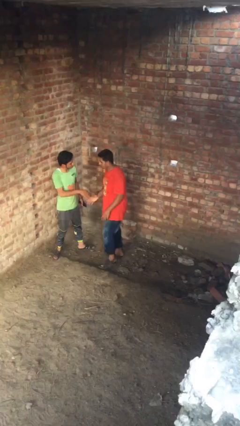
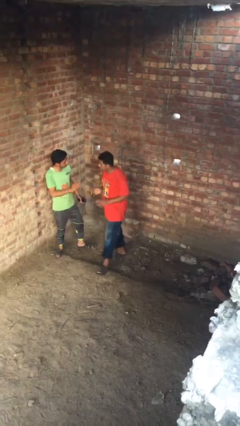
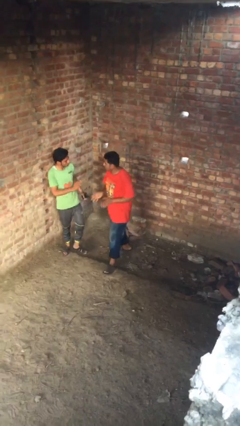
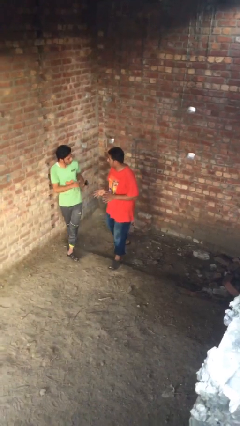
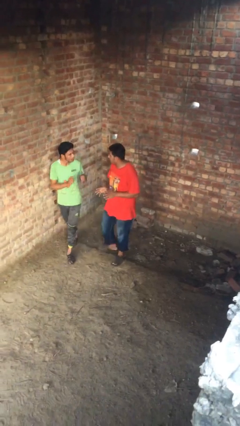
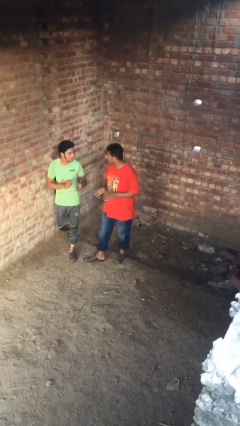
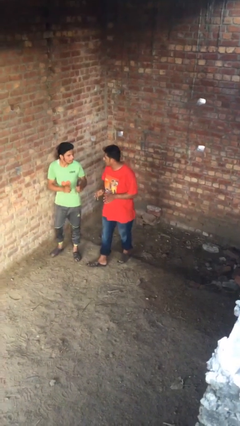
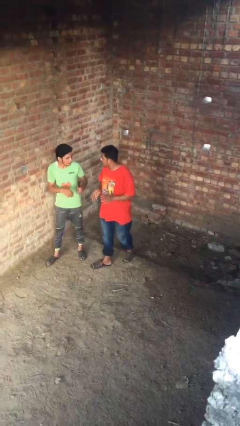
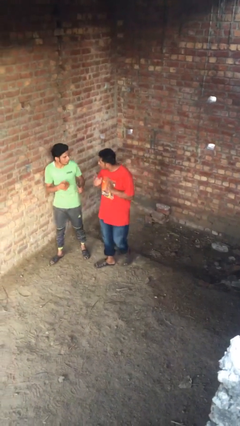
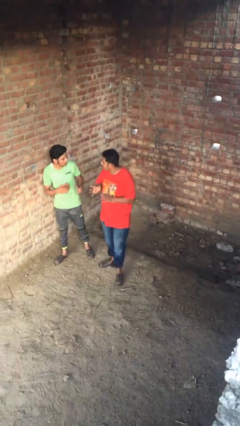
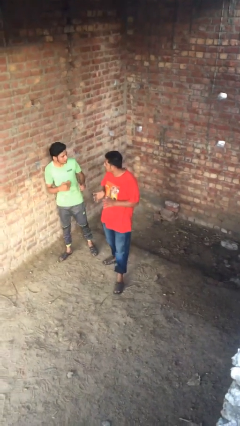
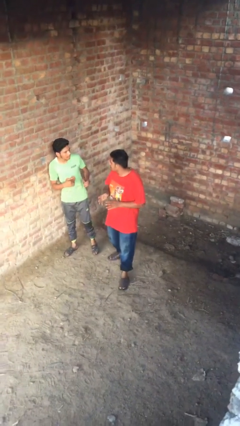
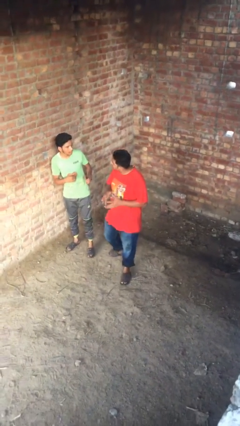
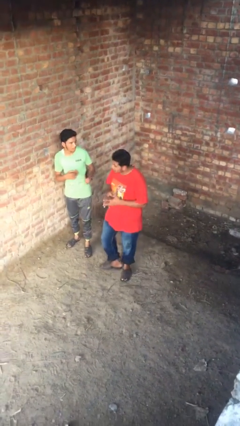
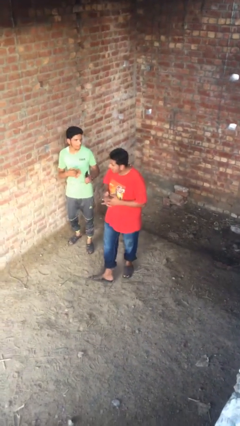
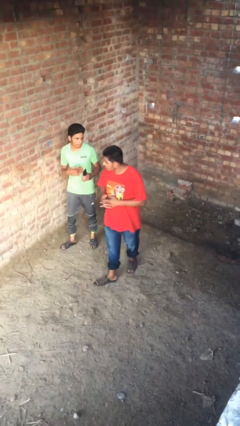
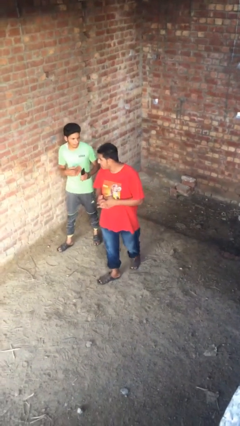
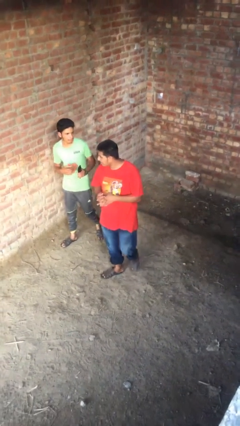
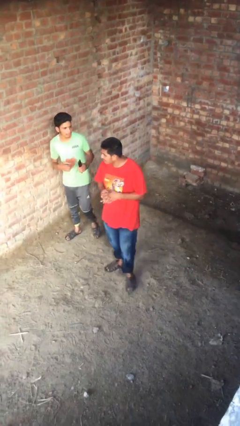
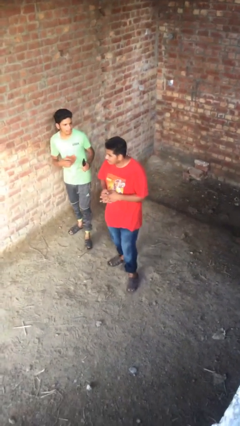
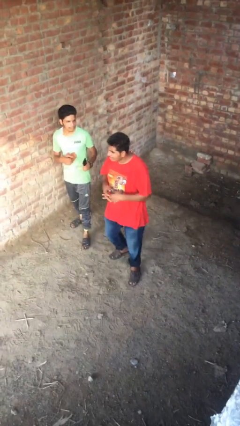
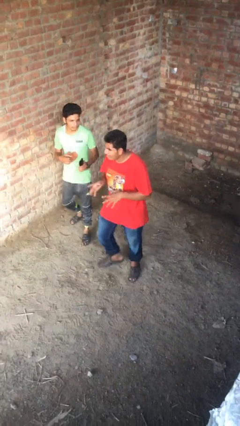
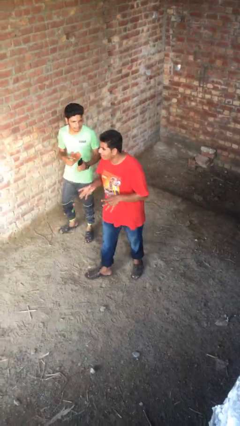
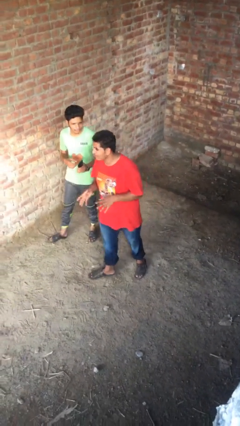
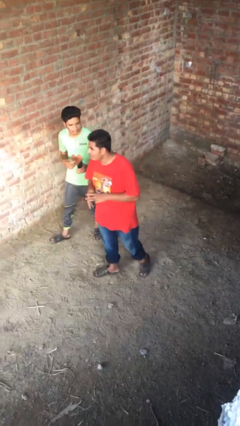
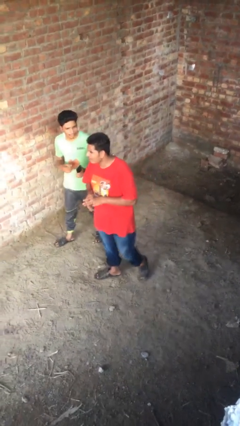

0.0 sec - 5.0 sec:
person talks to person

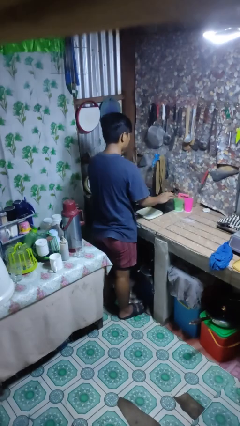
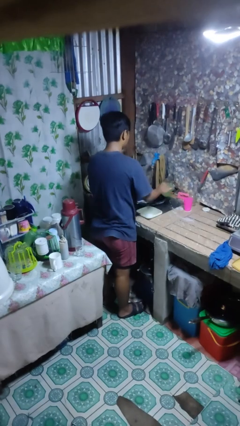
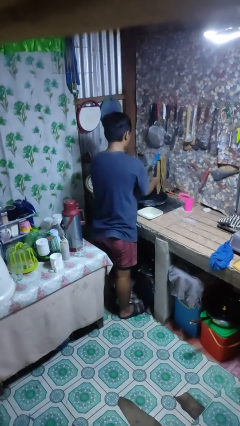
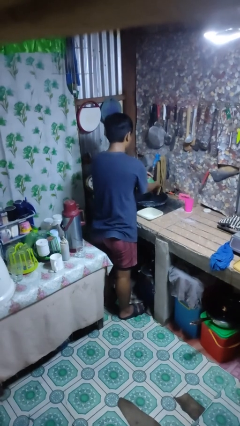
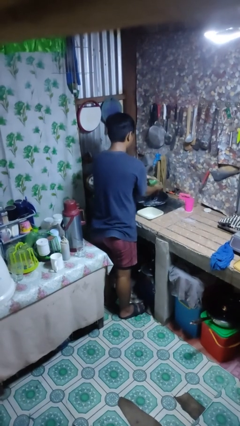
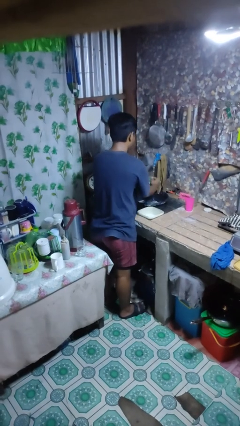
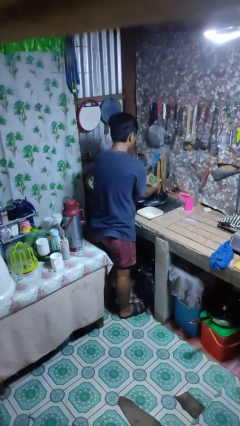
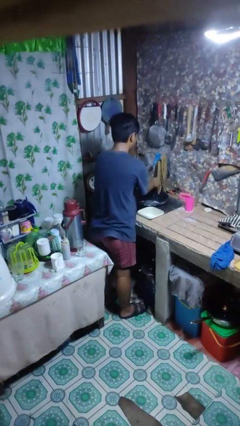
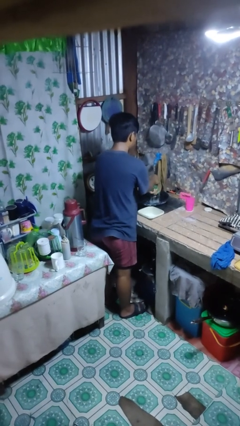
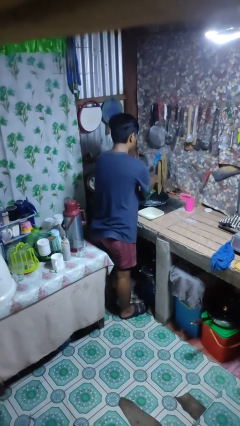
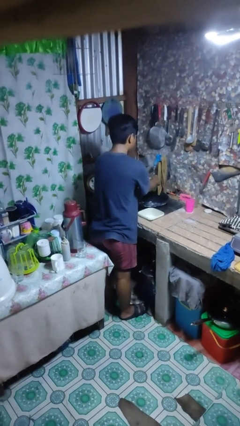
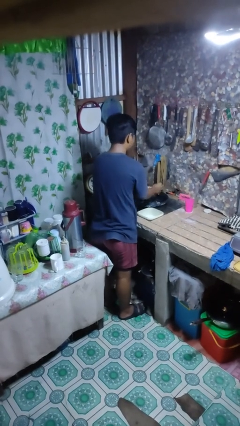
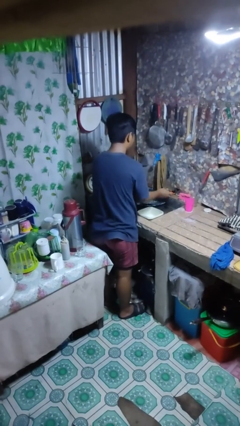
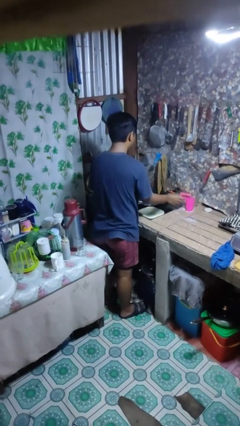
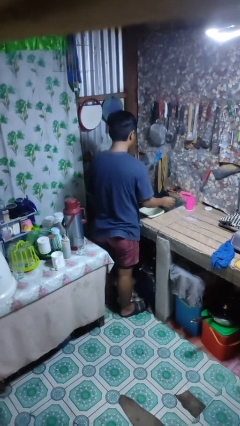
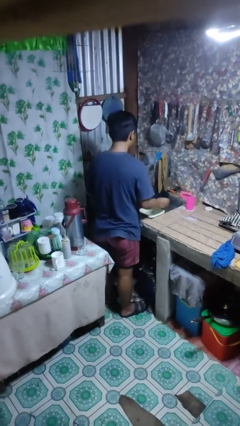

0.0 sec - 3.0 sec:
person washes dish

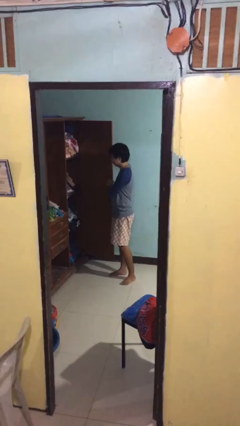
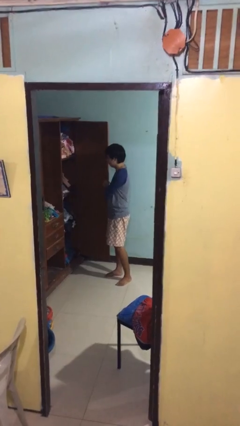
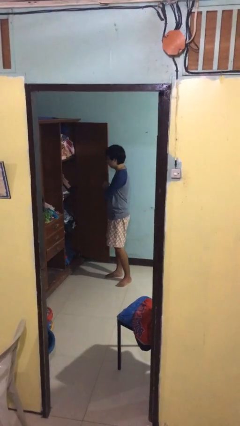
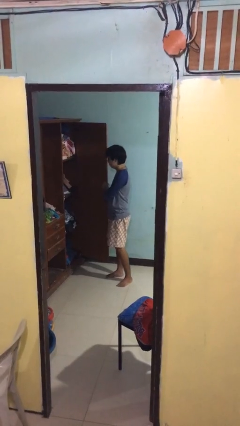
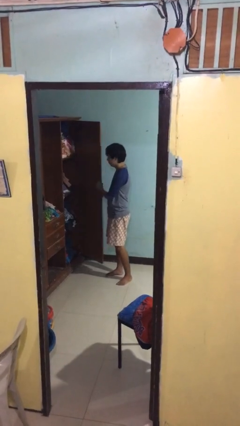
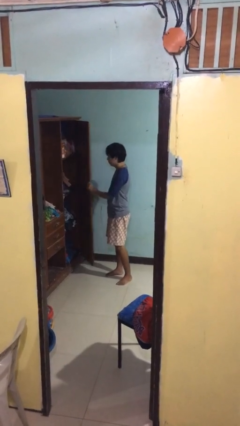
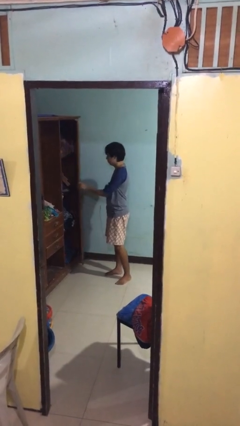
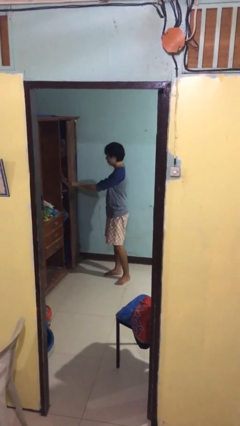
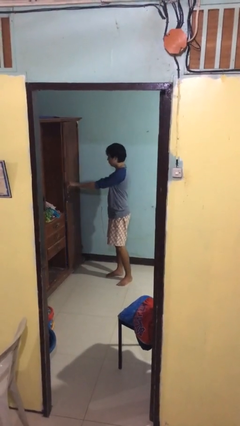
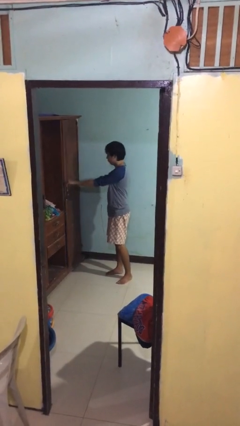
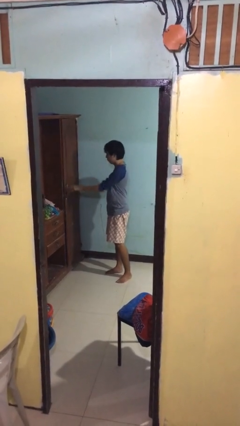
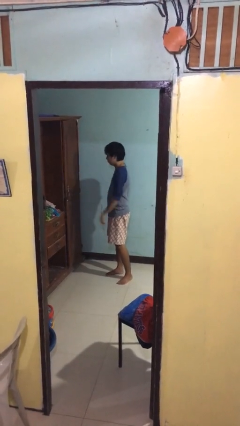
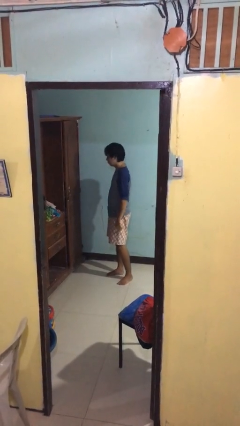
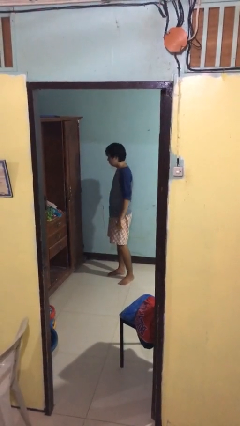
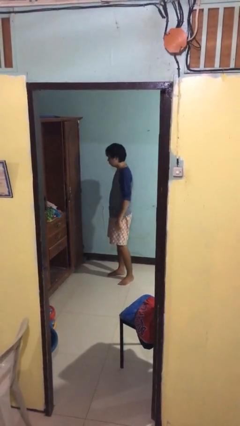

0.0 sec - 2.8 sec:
person closes closet door

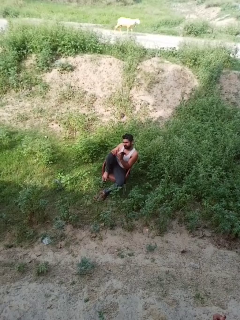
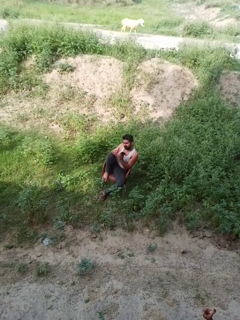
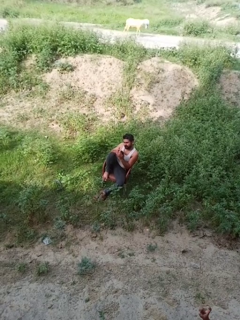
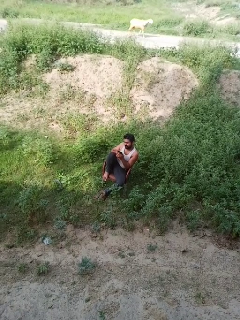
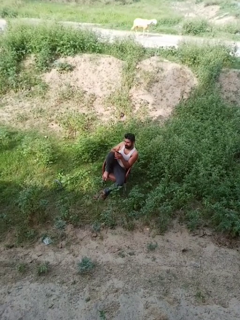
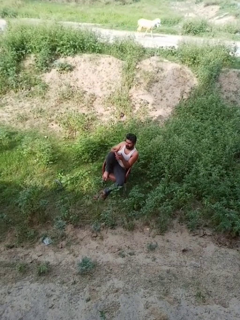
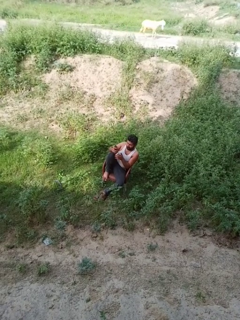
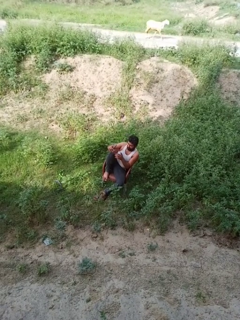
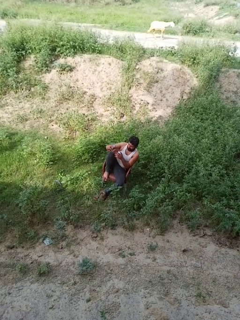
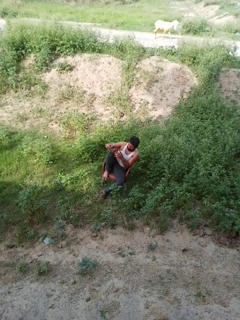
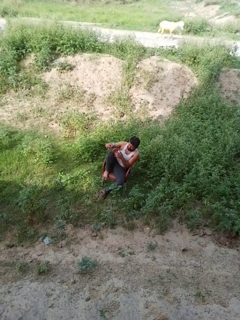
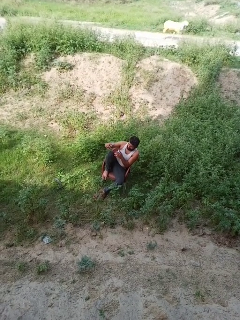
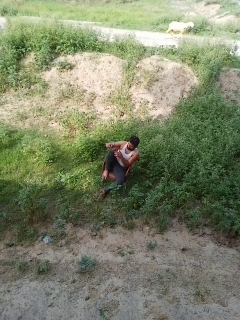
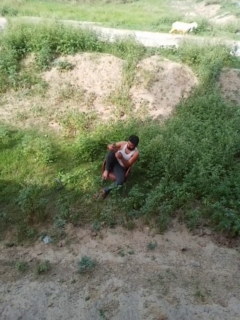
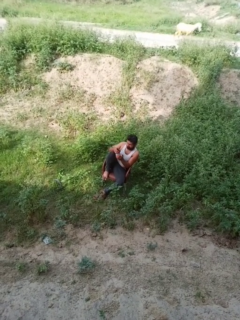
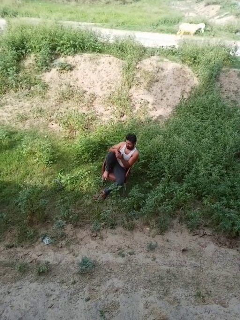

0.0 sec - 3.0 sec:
person takes selfie

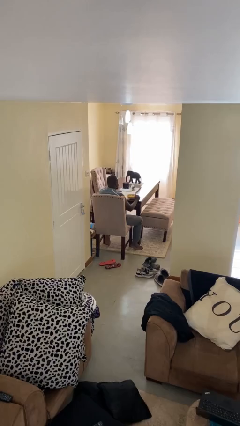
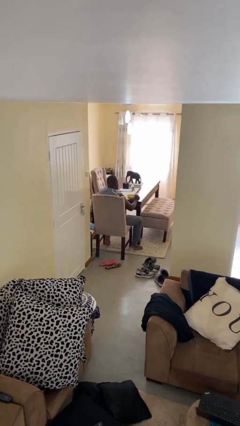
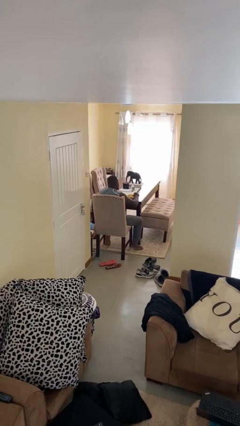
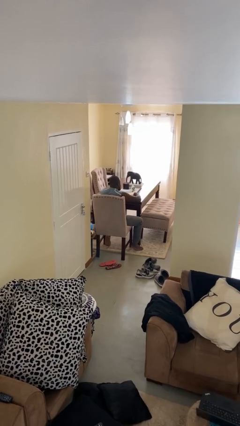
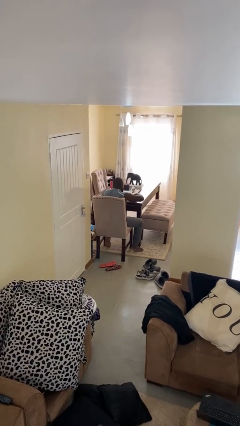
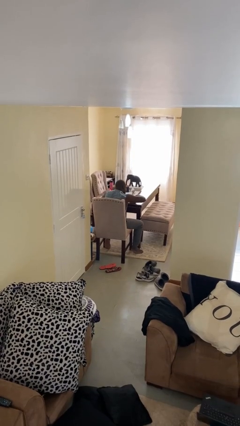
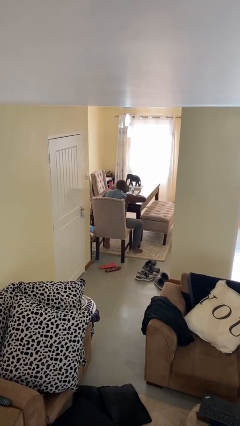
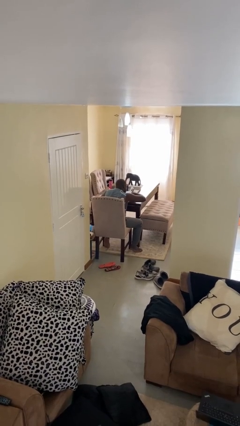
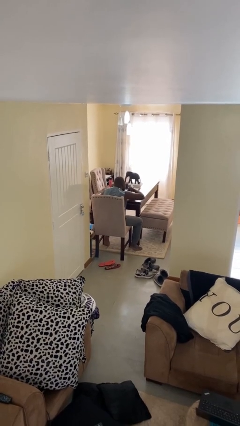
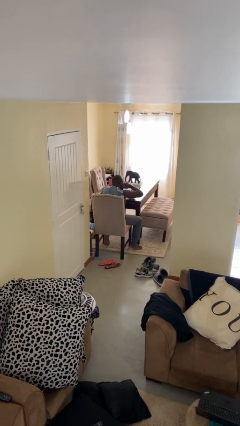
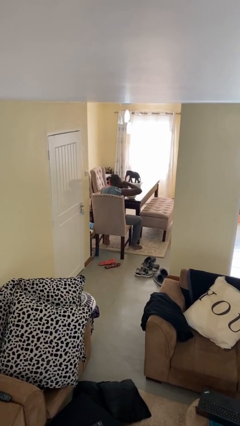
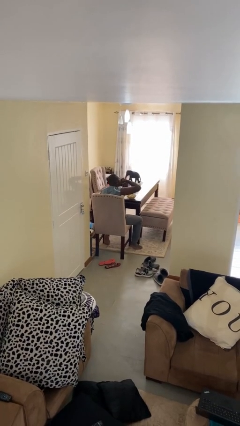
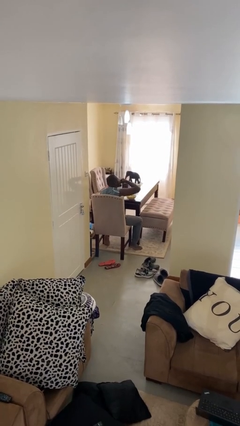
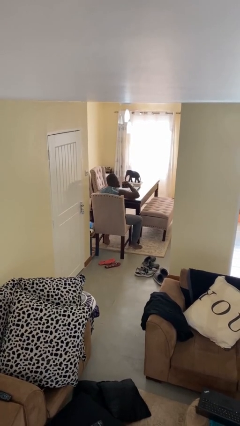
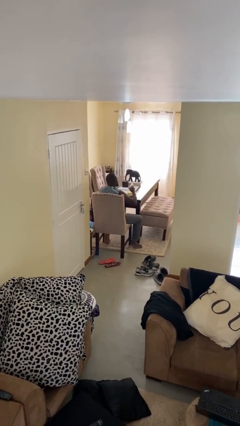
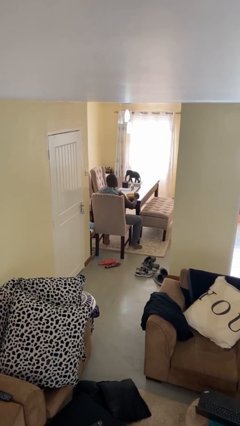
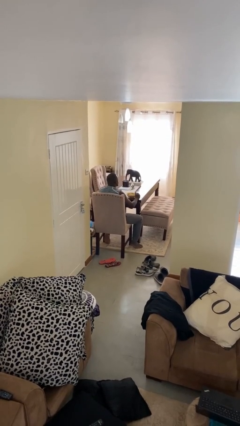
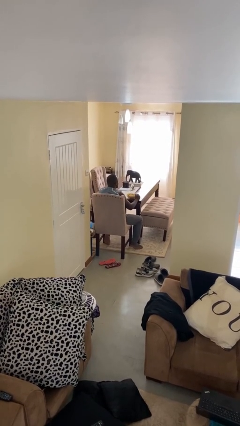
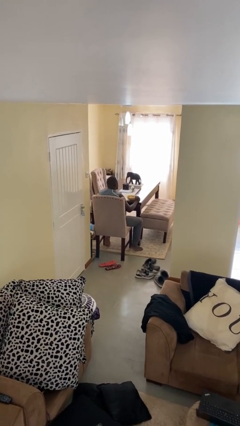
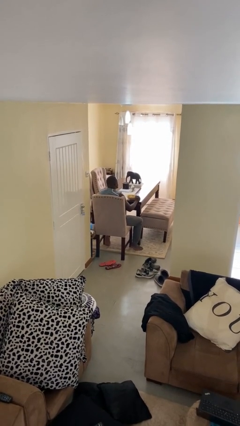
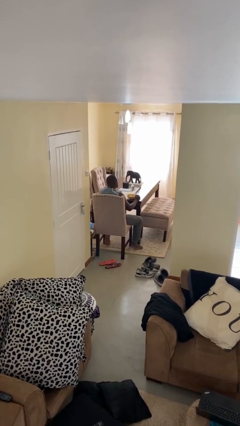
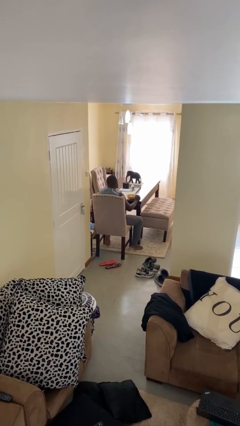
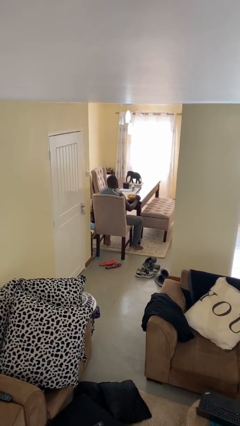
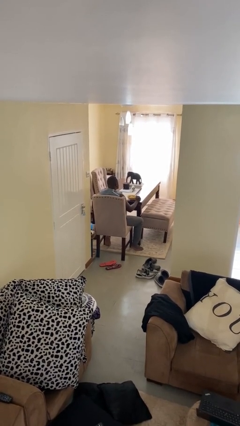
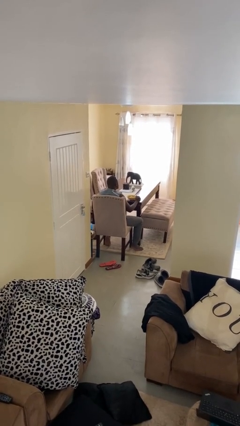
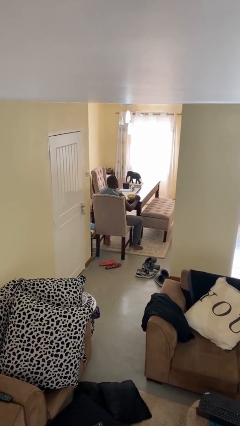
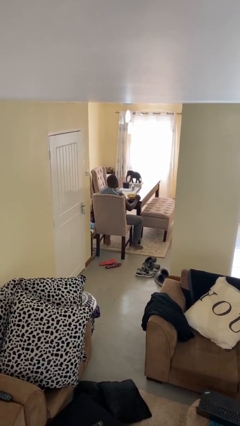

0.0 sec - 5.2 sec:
person eats with hands
